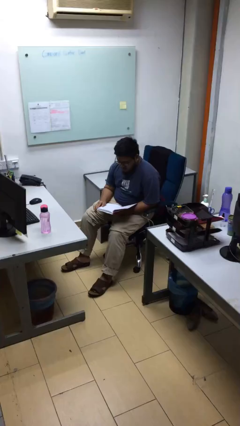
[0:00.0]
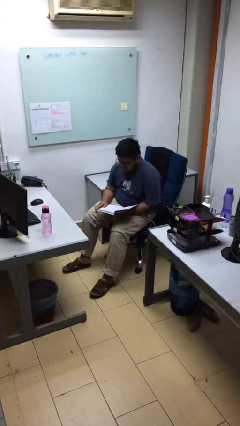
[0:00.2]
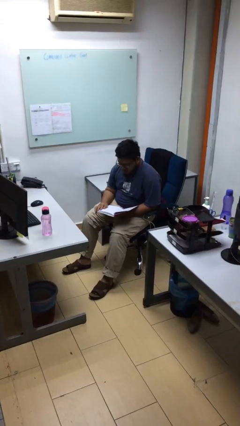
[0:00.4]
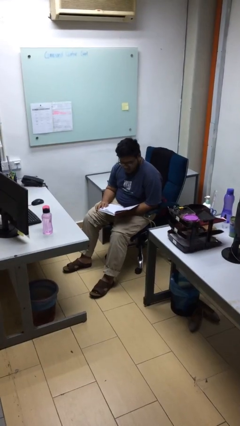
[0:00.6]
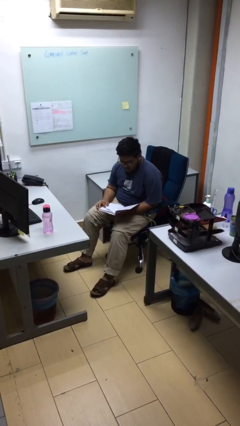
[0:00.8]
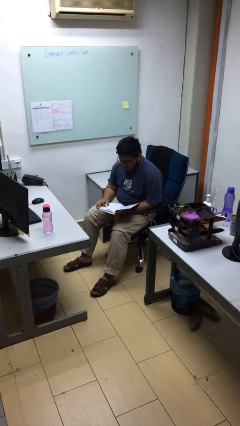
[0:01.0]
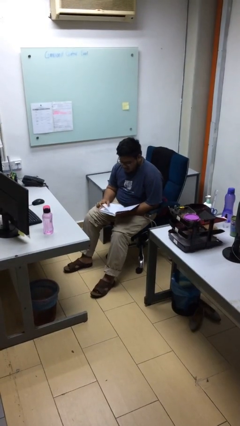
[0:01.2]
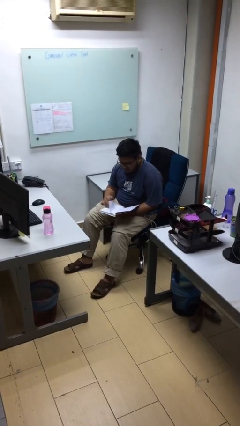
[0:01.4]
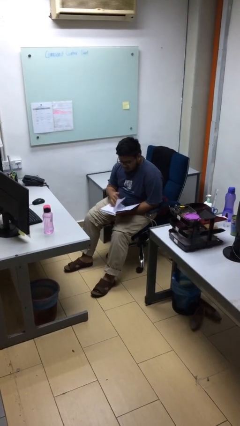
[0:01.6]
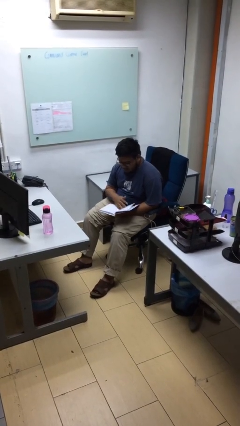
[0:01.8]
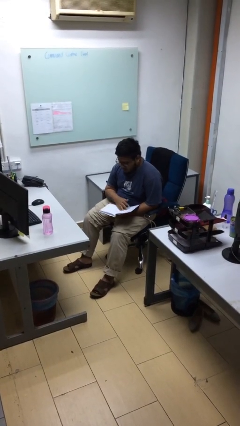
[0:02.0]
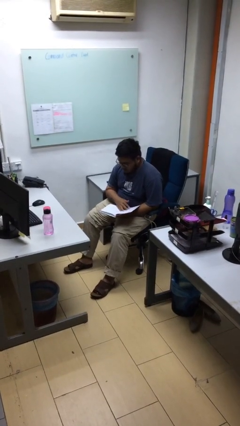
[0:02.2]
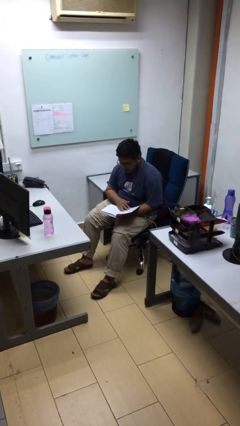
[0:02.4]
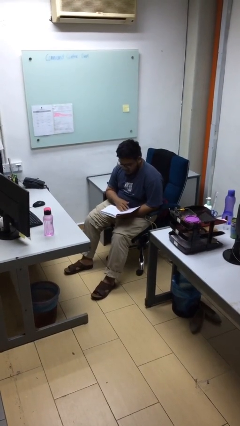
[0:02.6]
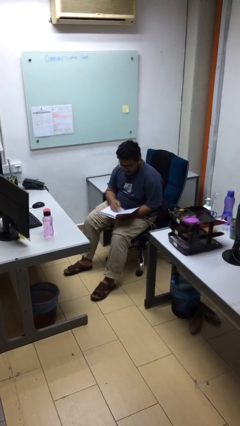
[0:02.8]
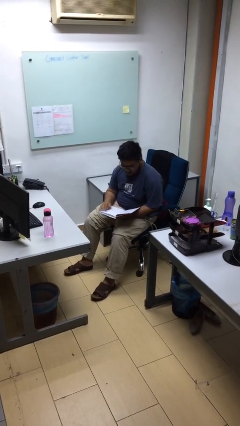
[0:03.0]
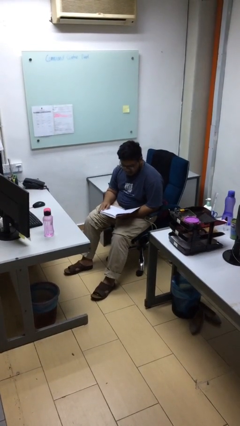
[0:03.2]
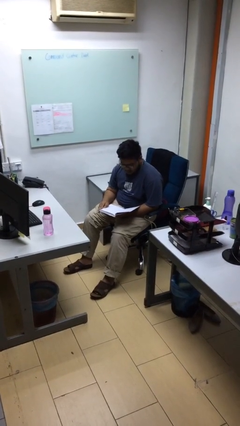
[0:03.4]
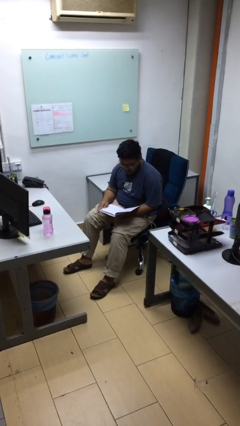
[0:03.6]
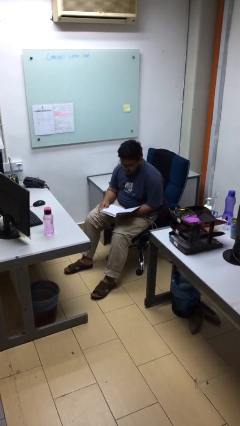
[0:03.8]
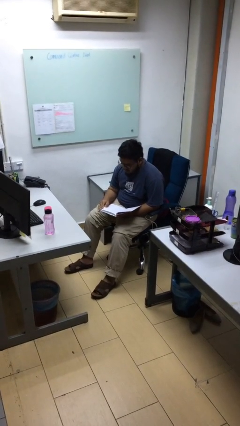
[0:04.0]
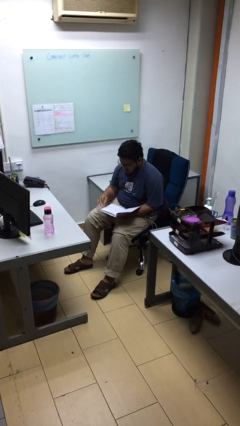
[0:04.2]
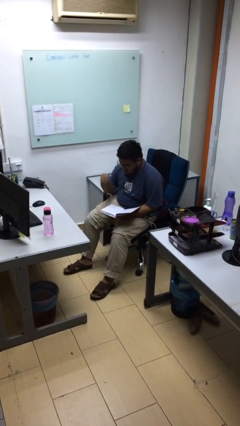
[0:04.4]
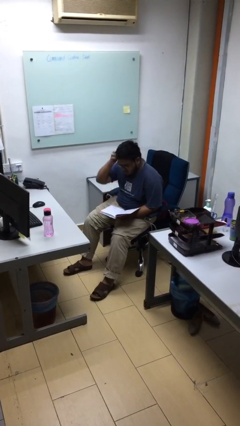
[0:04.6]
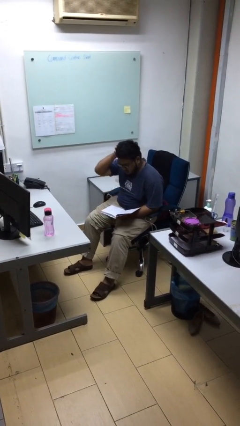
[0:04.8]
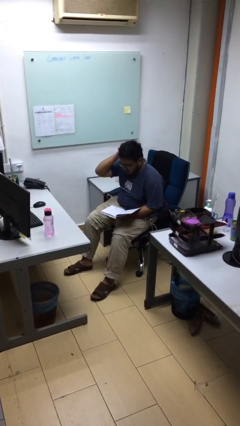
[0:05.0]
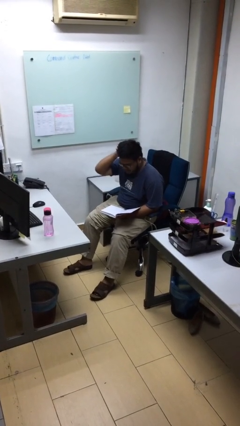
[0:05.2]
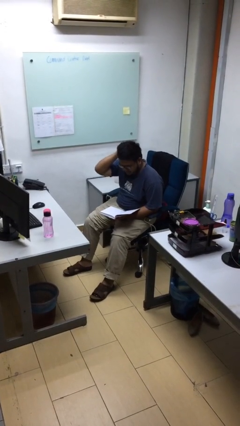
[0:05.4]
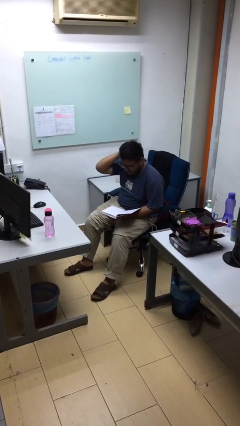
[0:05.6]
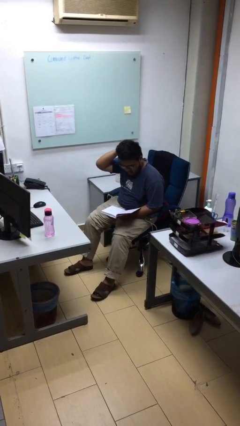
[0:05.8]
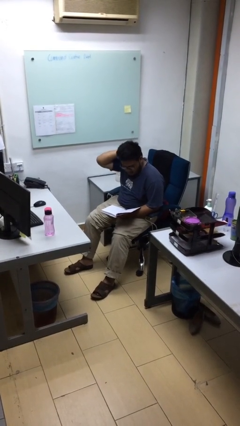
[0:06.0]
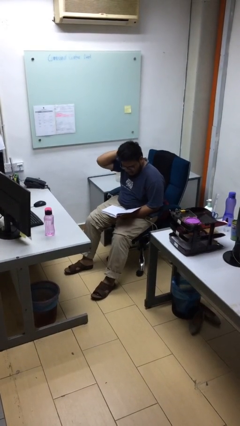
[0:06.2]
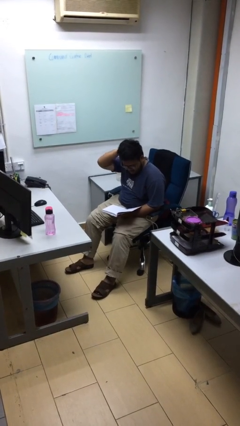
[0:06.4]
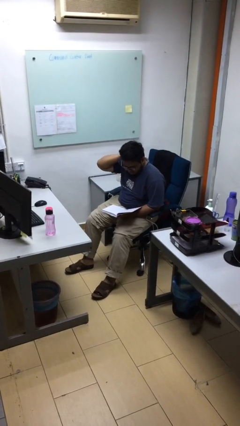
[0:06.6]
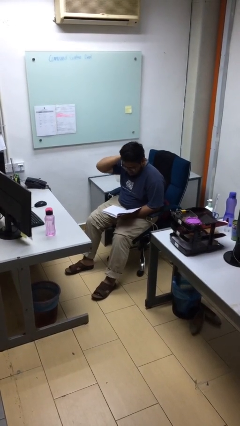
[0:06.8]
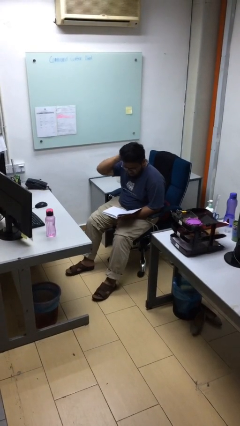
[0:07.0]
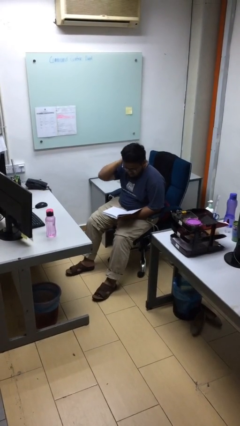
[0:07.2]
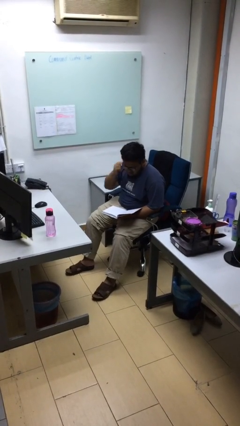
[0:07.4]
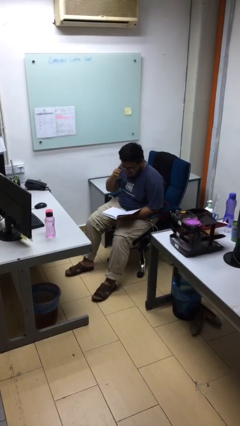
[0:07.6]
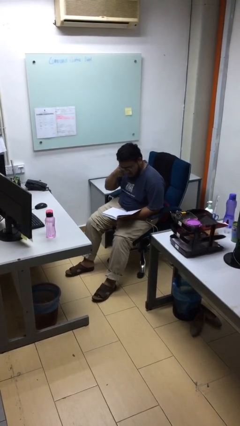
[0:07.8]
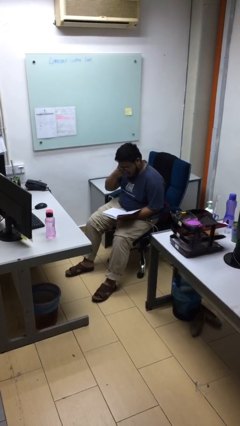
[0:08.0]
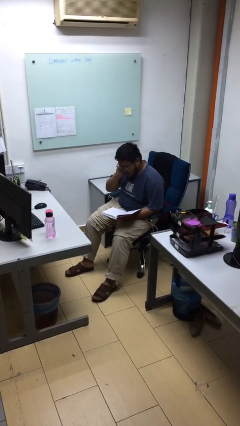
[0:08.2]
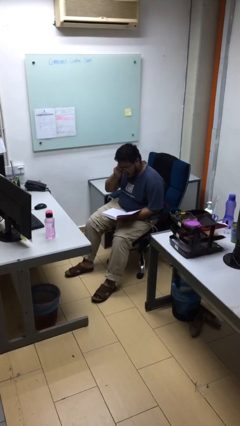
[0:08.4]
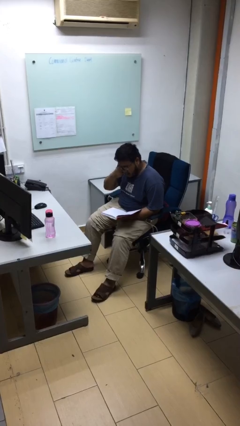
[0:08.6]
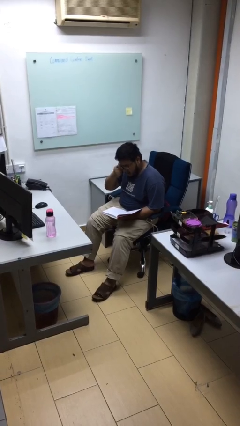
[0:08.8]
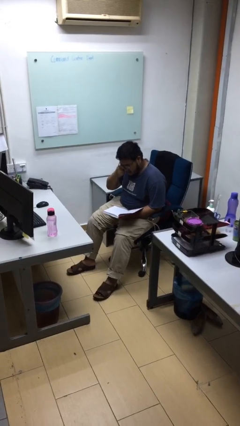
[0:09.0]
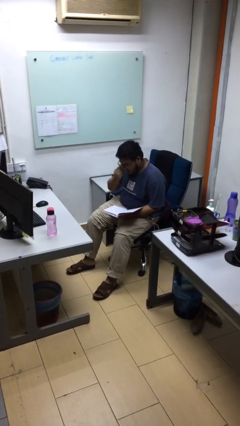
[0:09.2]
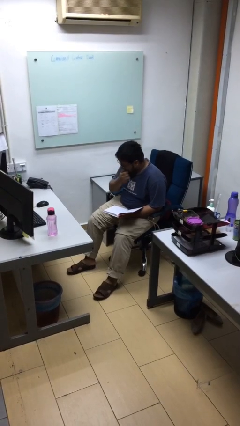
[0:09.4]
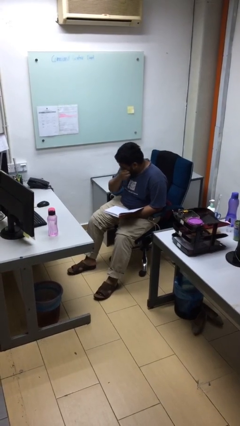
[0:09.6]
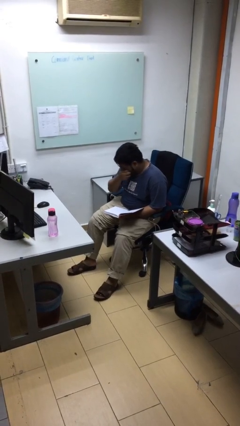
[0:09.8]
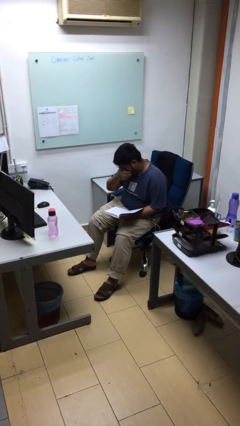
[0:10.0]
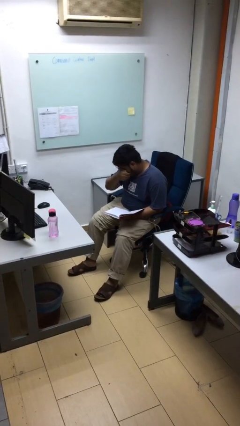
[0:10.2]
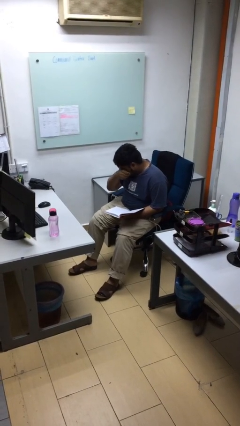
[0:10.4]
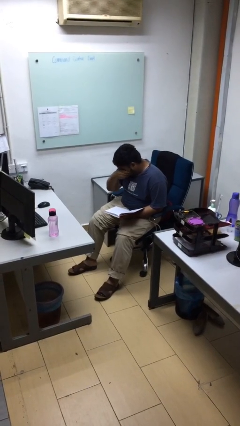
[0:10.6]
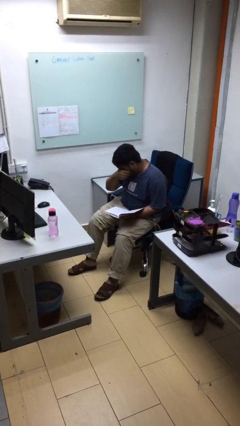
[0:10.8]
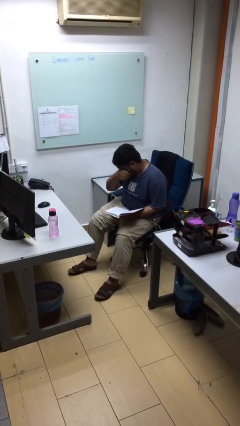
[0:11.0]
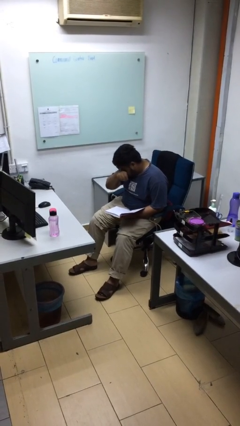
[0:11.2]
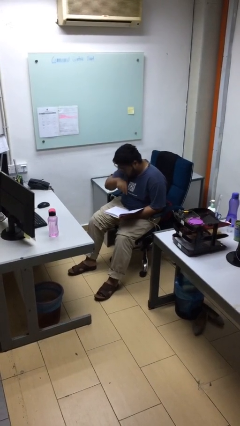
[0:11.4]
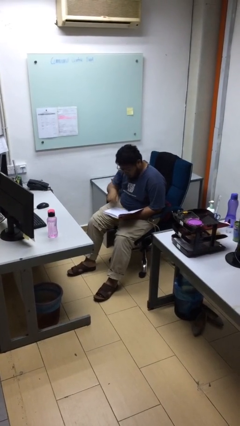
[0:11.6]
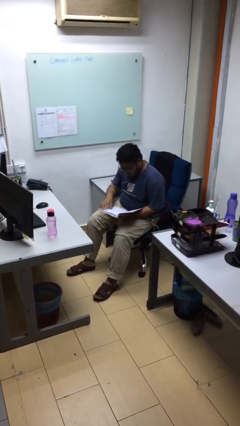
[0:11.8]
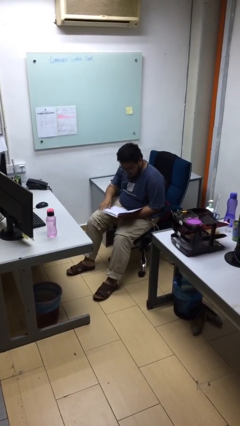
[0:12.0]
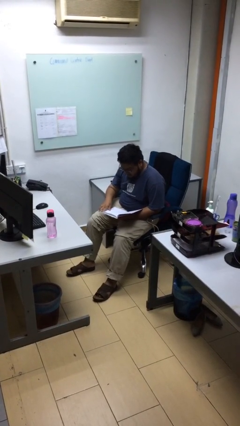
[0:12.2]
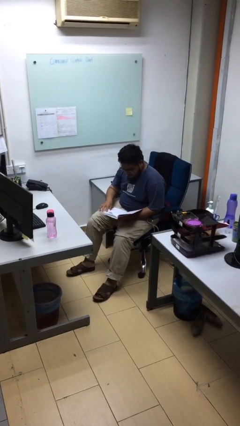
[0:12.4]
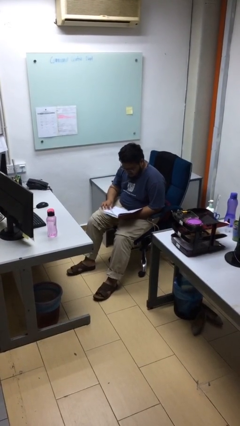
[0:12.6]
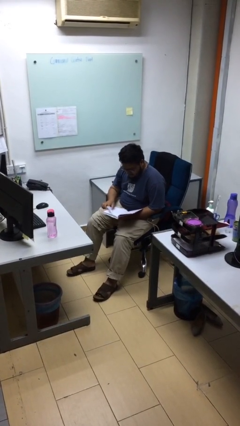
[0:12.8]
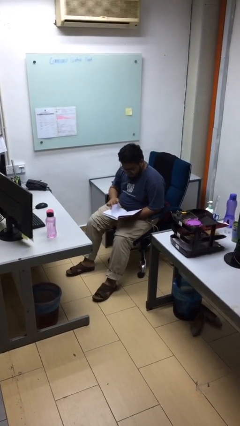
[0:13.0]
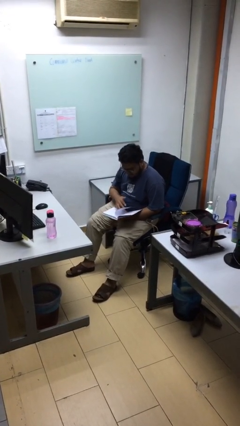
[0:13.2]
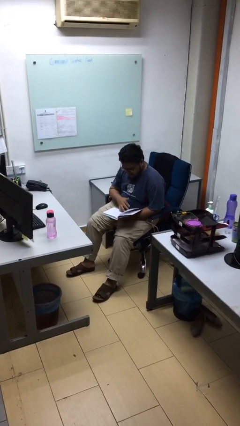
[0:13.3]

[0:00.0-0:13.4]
person reads document

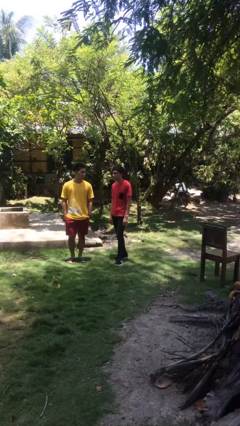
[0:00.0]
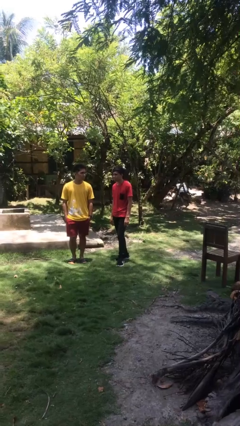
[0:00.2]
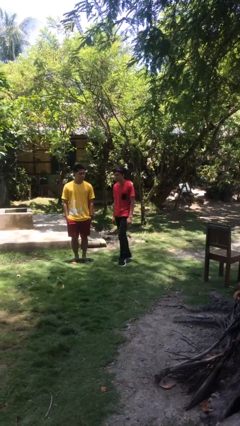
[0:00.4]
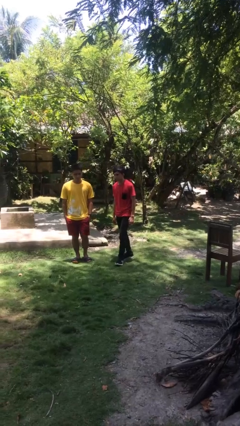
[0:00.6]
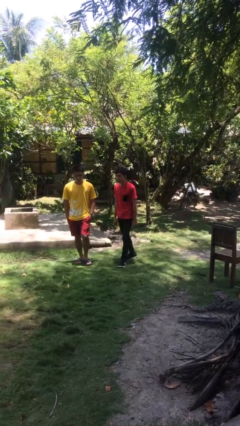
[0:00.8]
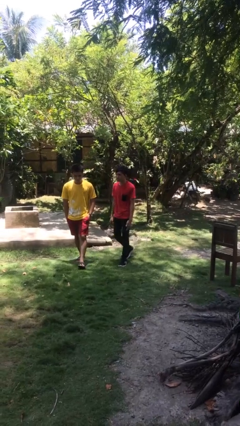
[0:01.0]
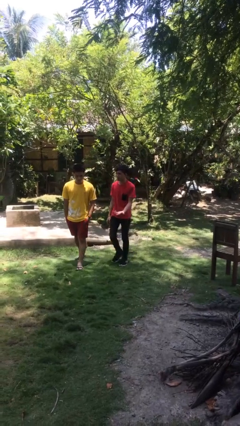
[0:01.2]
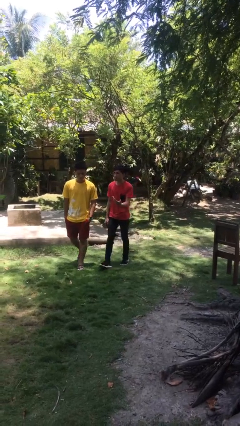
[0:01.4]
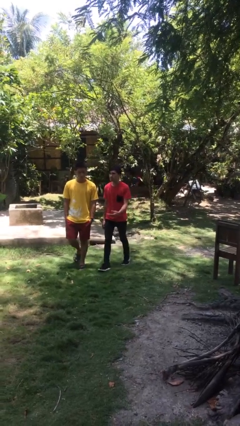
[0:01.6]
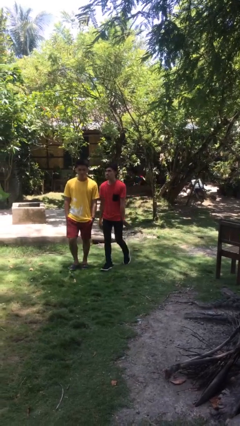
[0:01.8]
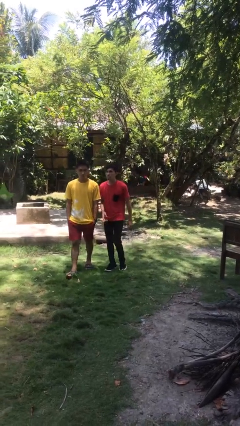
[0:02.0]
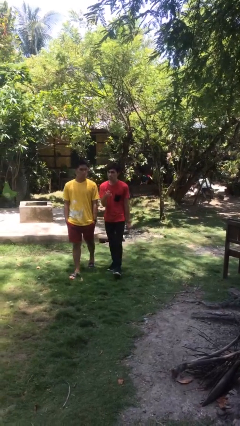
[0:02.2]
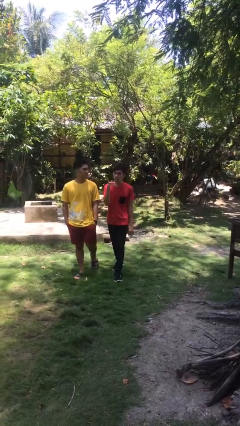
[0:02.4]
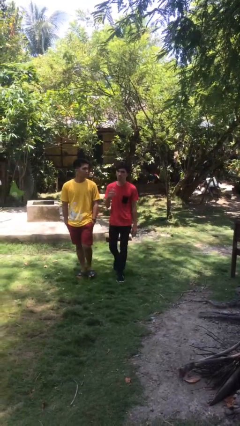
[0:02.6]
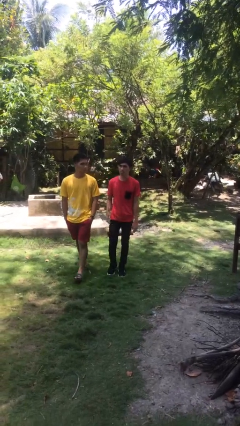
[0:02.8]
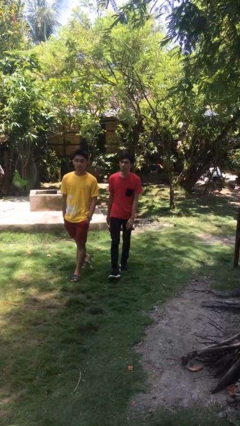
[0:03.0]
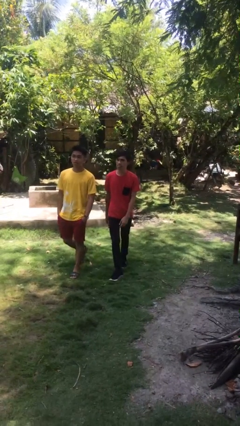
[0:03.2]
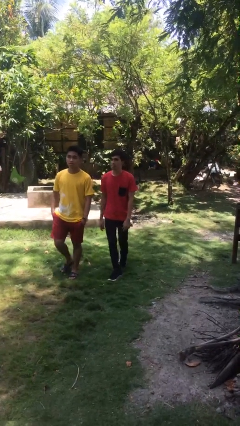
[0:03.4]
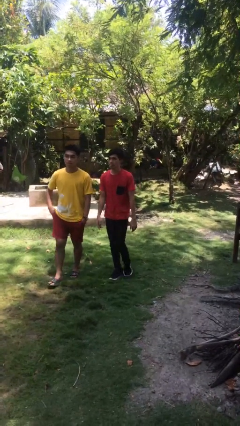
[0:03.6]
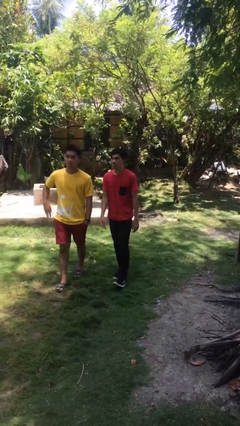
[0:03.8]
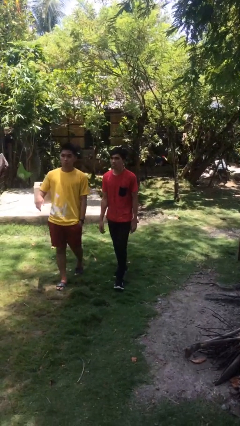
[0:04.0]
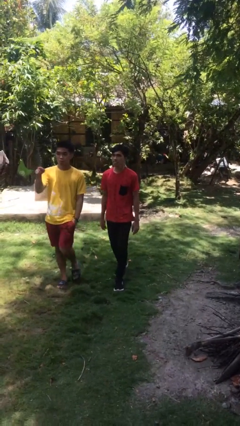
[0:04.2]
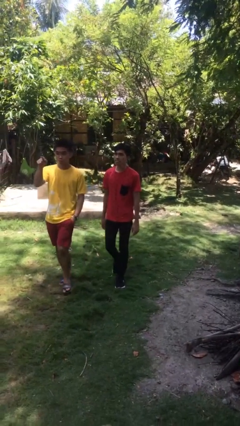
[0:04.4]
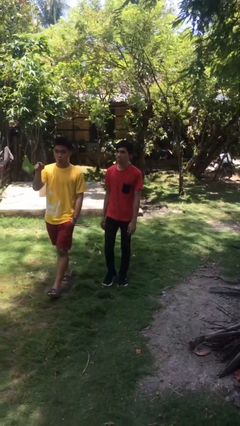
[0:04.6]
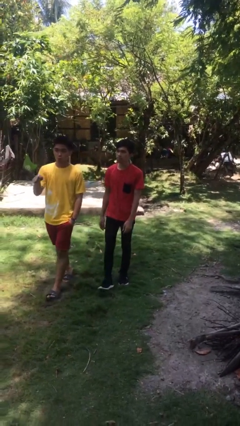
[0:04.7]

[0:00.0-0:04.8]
person talks to person
